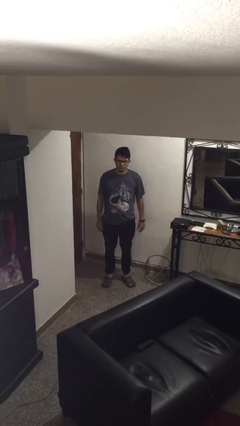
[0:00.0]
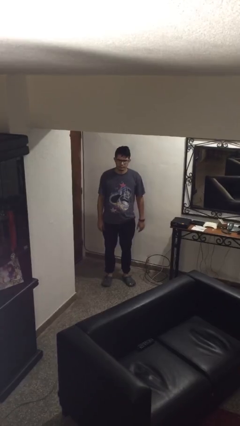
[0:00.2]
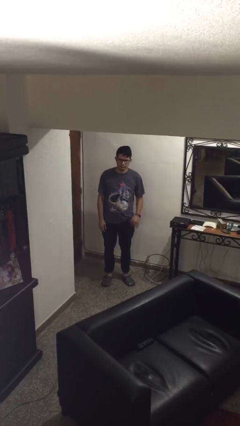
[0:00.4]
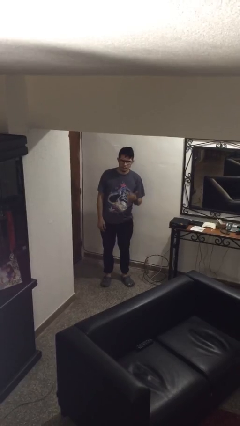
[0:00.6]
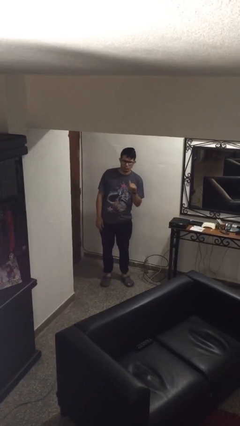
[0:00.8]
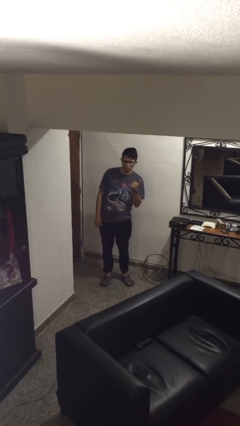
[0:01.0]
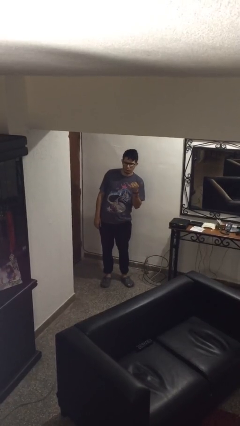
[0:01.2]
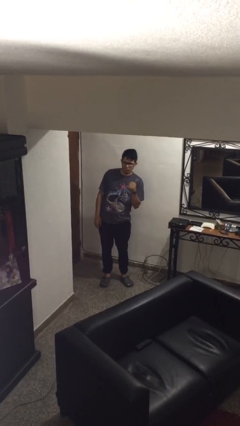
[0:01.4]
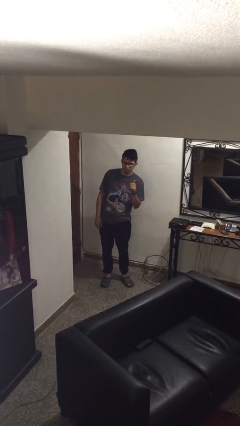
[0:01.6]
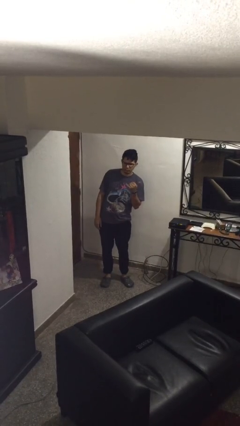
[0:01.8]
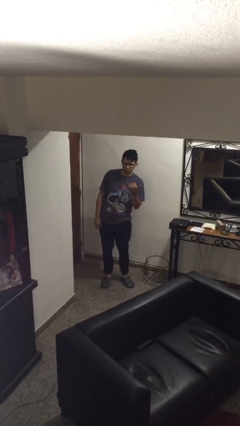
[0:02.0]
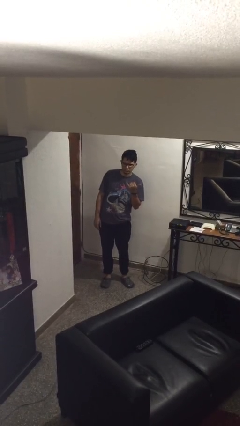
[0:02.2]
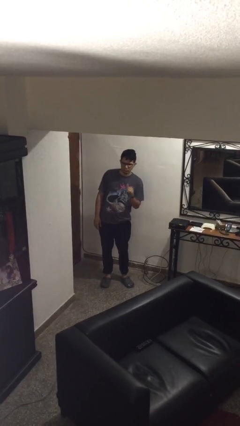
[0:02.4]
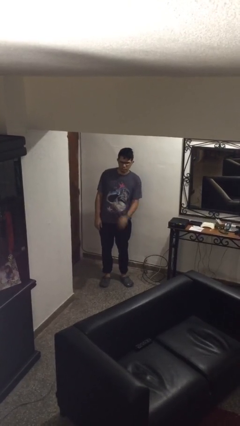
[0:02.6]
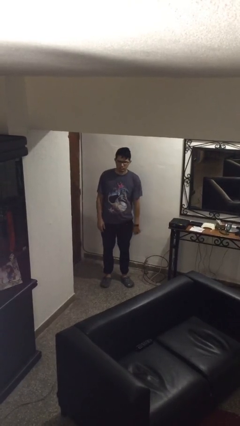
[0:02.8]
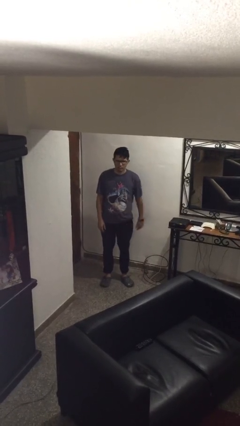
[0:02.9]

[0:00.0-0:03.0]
person gestures hang loose

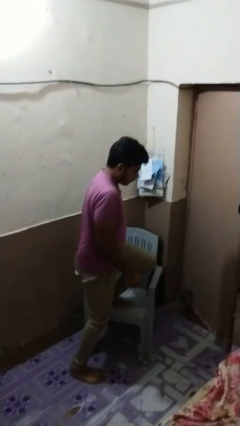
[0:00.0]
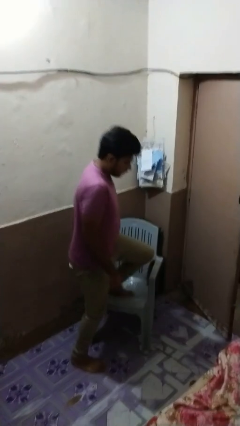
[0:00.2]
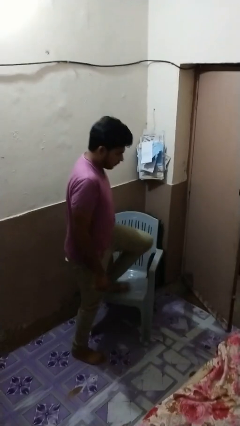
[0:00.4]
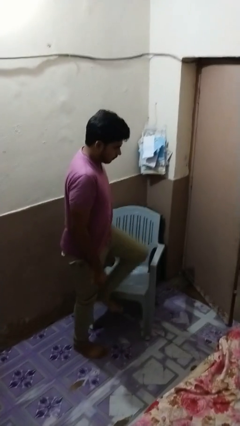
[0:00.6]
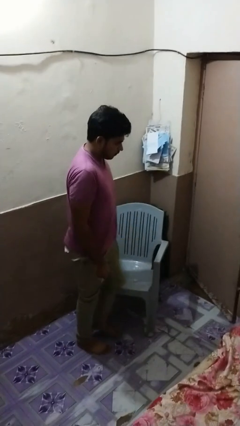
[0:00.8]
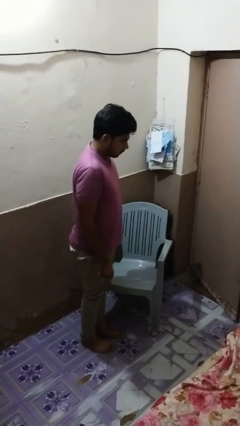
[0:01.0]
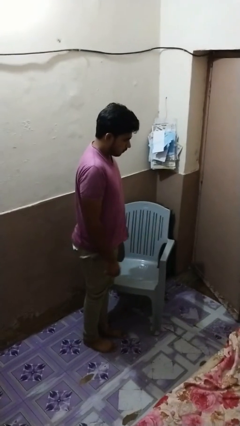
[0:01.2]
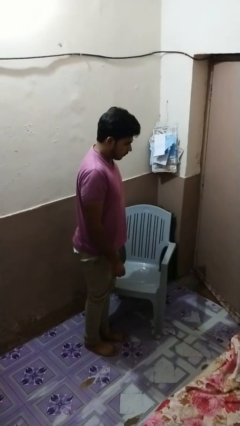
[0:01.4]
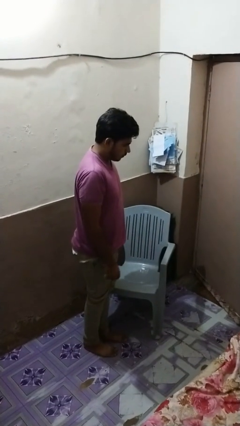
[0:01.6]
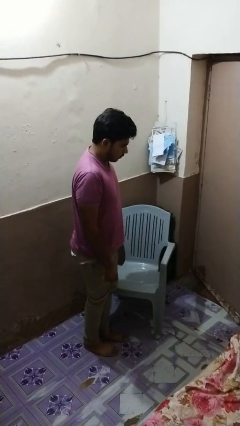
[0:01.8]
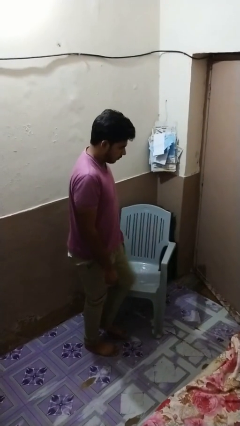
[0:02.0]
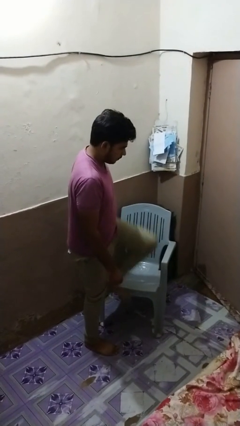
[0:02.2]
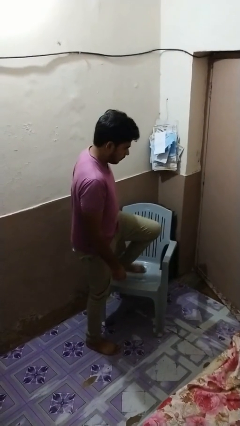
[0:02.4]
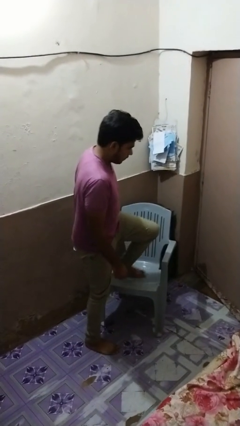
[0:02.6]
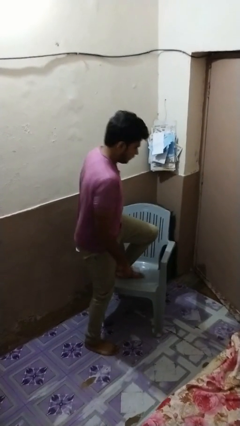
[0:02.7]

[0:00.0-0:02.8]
person climbs off chair

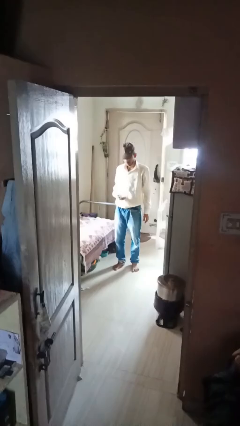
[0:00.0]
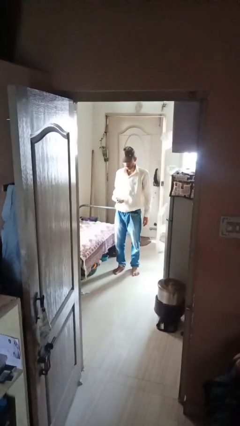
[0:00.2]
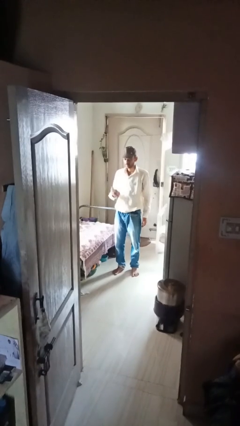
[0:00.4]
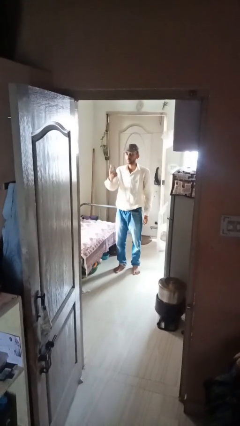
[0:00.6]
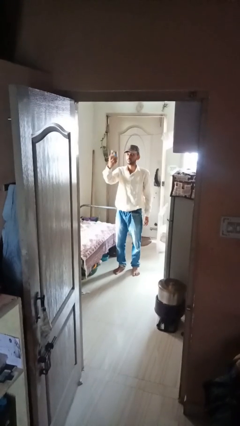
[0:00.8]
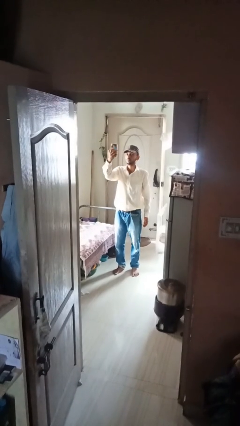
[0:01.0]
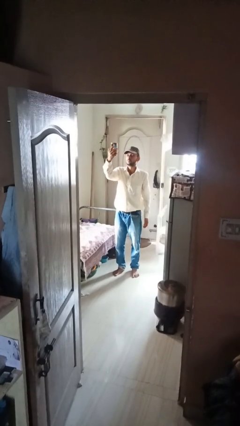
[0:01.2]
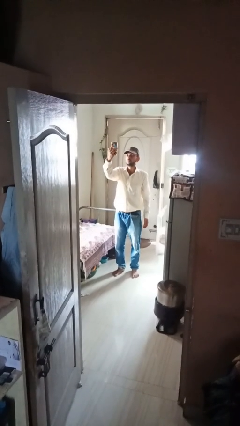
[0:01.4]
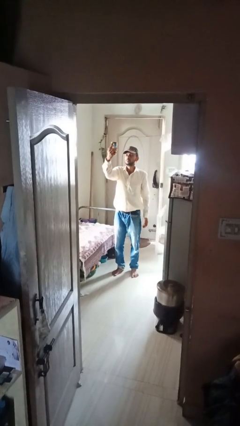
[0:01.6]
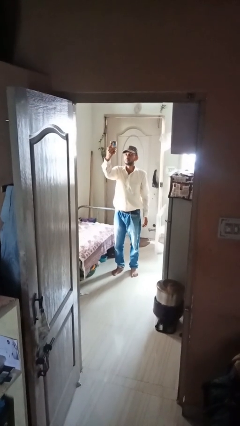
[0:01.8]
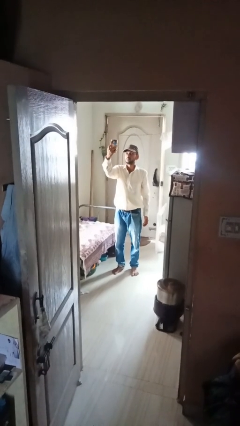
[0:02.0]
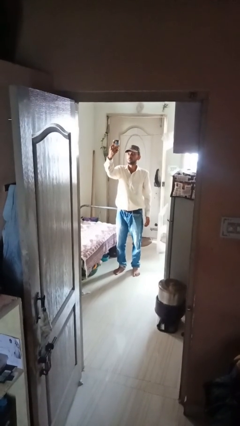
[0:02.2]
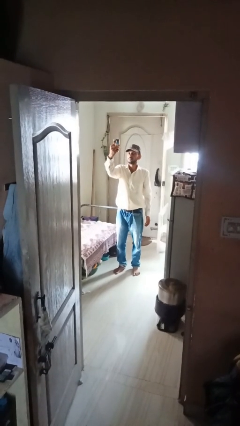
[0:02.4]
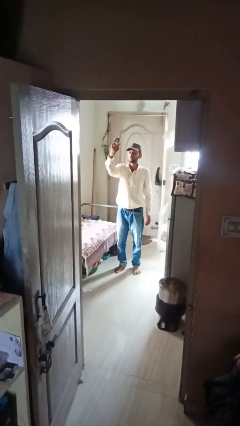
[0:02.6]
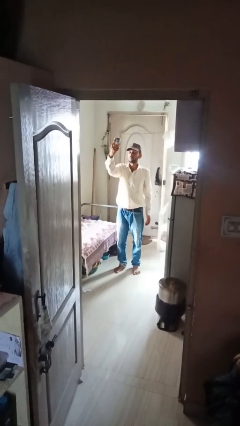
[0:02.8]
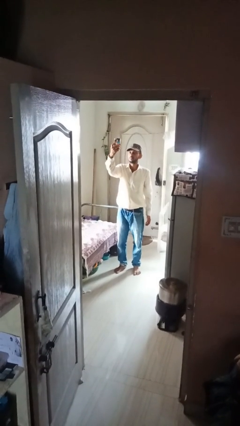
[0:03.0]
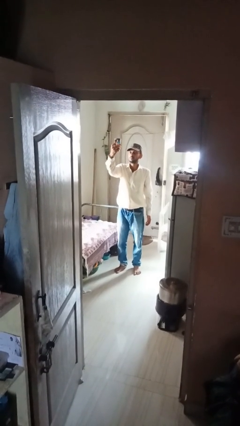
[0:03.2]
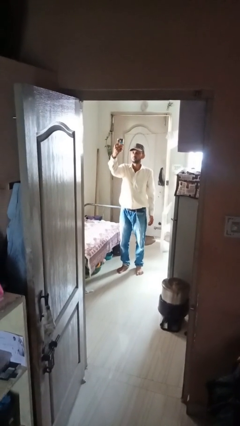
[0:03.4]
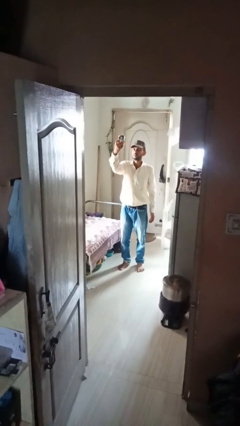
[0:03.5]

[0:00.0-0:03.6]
person takes selfie

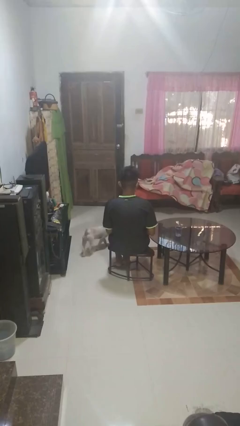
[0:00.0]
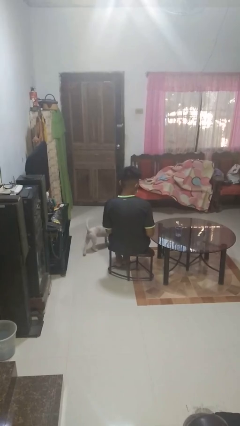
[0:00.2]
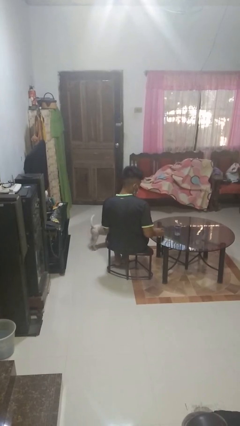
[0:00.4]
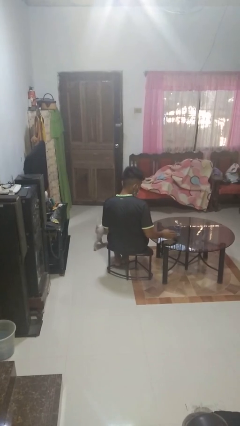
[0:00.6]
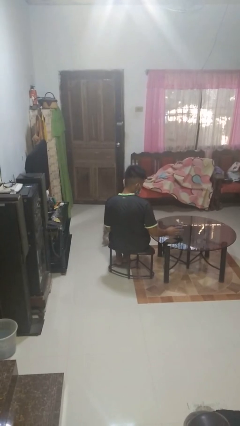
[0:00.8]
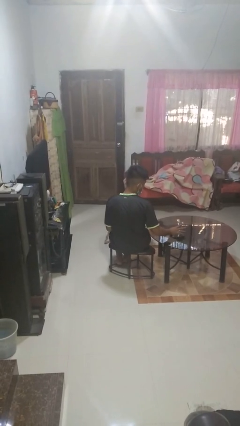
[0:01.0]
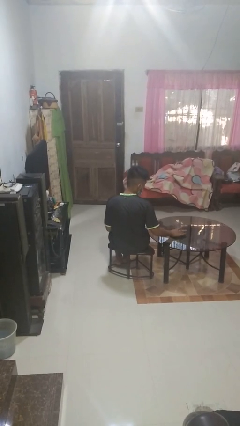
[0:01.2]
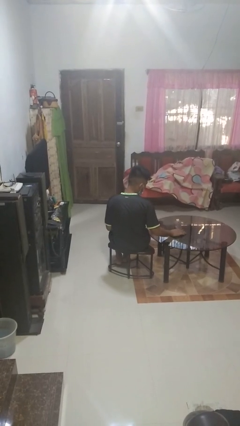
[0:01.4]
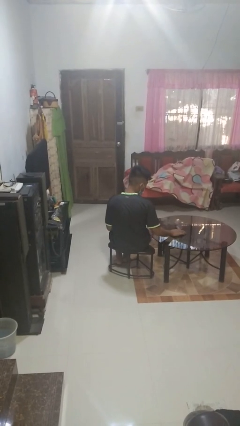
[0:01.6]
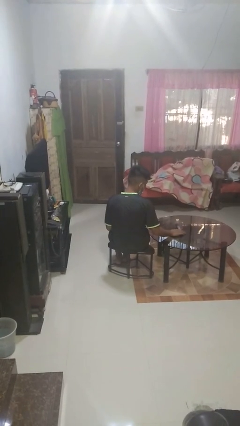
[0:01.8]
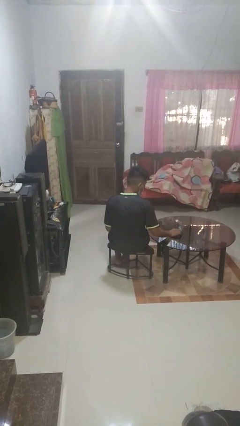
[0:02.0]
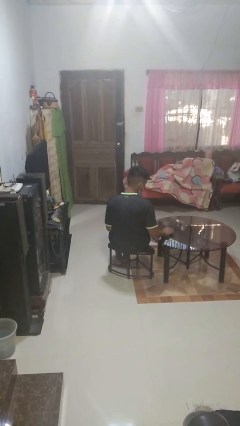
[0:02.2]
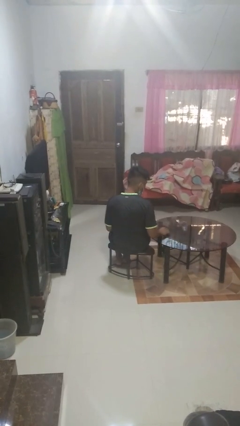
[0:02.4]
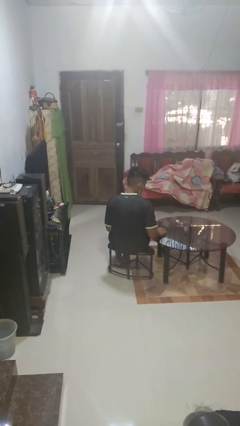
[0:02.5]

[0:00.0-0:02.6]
person knocks over glass

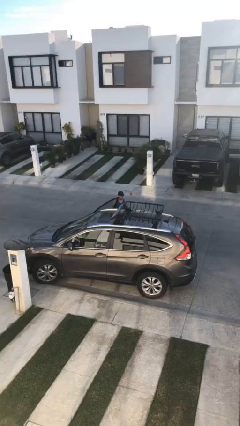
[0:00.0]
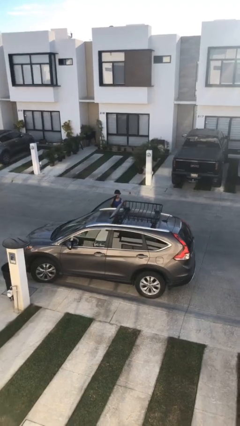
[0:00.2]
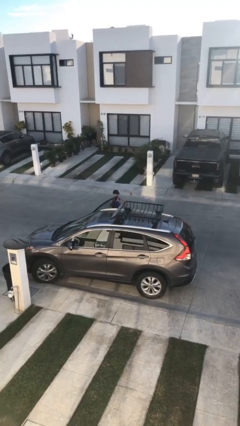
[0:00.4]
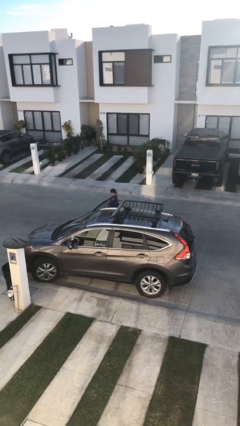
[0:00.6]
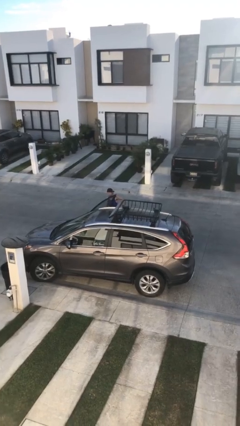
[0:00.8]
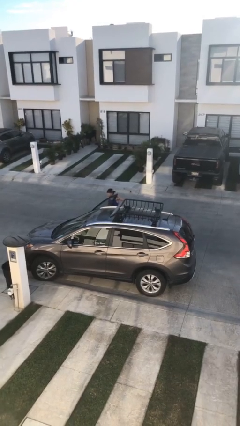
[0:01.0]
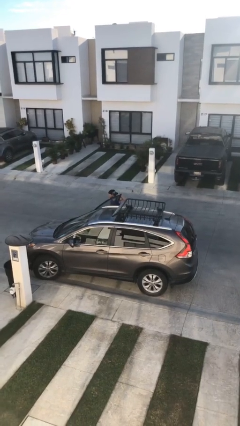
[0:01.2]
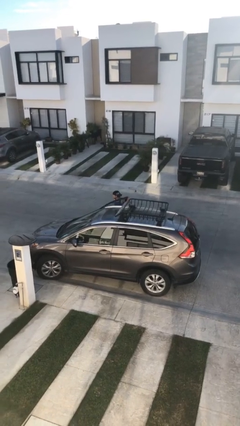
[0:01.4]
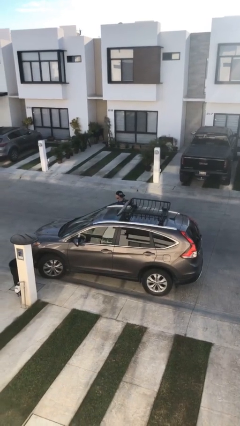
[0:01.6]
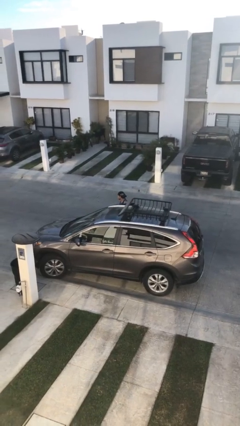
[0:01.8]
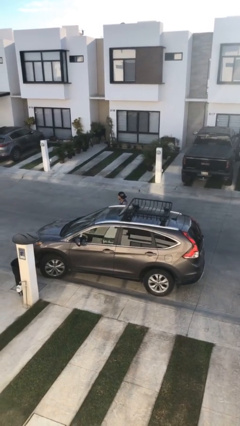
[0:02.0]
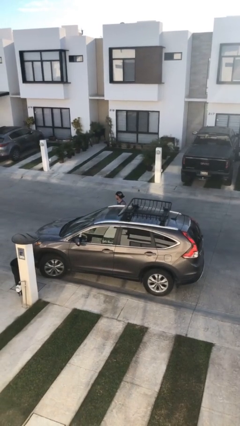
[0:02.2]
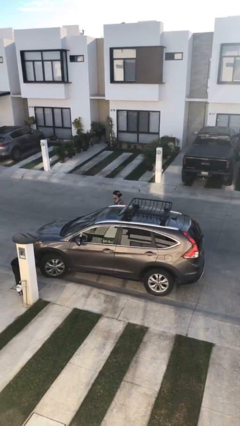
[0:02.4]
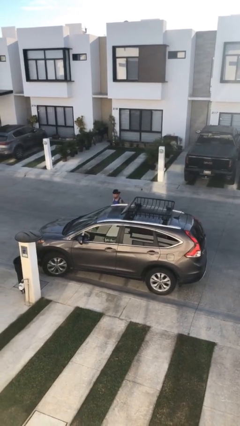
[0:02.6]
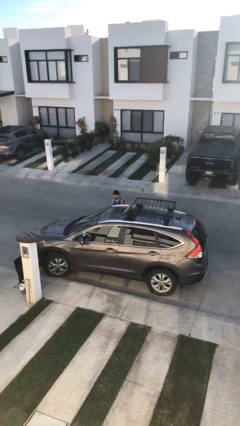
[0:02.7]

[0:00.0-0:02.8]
person closes car door

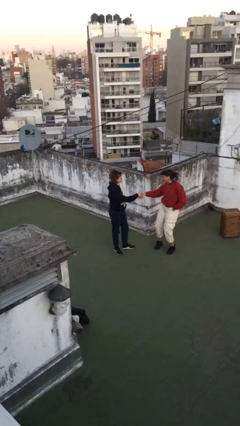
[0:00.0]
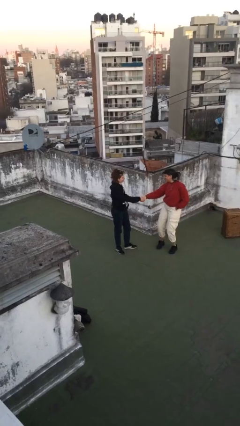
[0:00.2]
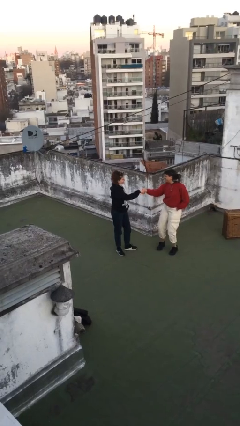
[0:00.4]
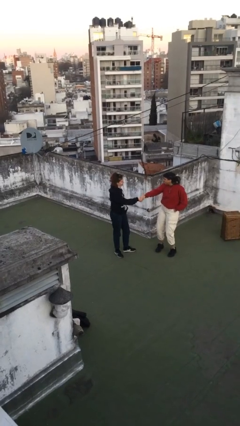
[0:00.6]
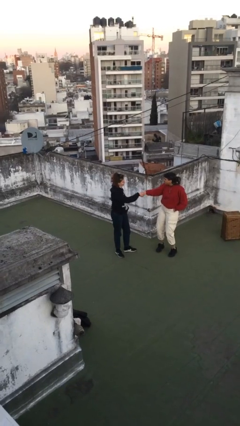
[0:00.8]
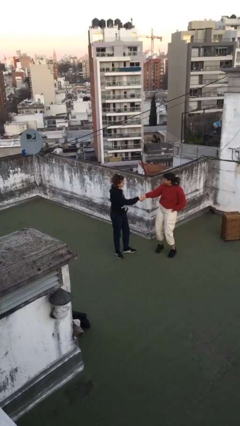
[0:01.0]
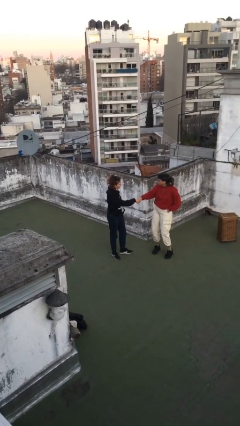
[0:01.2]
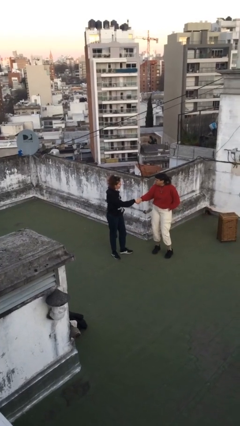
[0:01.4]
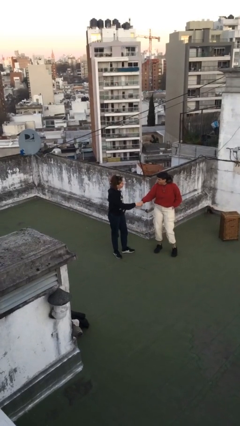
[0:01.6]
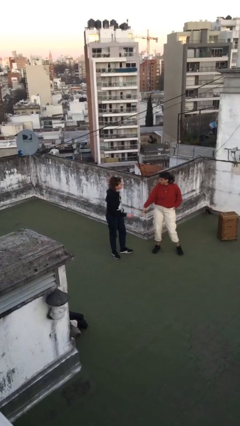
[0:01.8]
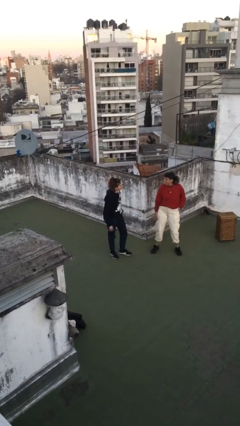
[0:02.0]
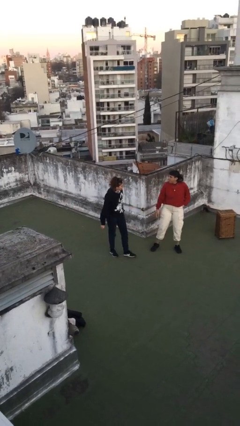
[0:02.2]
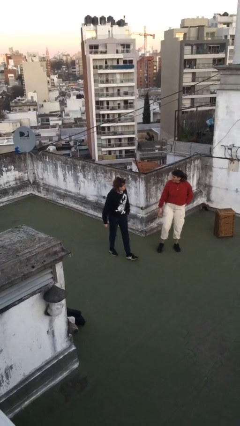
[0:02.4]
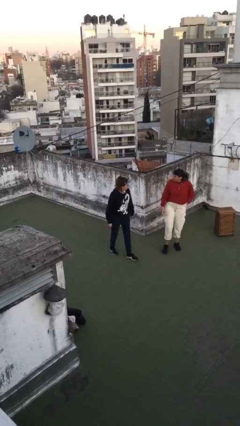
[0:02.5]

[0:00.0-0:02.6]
person shakes hand
